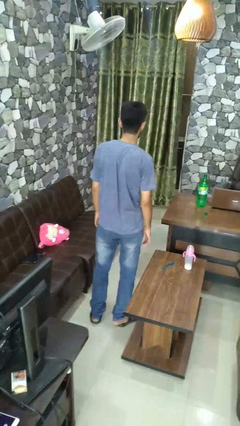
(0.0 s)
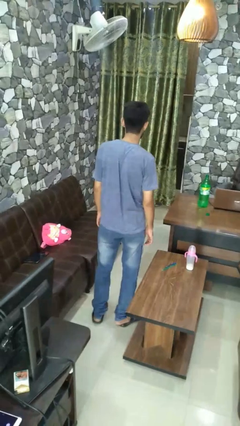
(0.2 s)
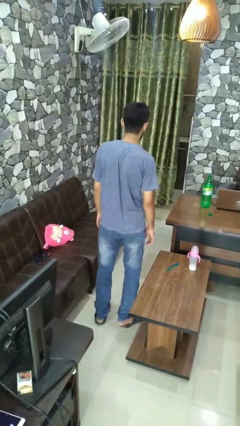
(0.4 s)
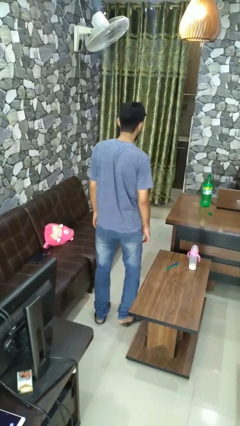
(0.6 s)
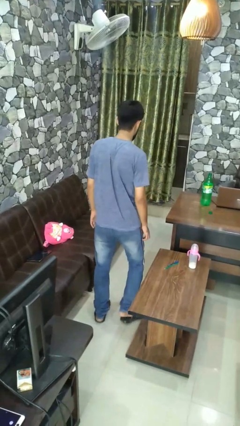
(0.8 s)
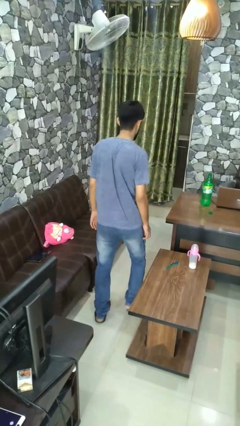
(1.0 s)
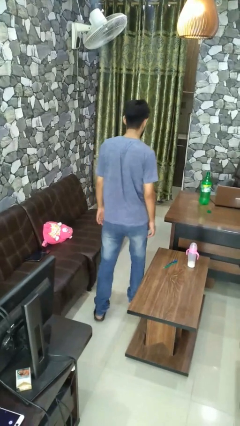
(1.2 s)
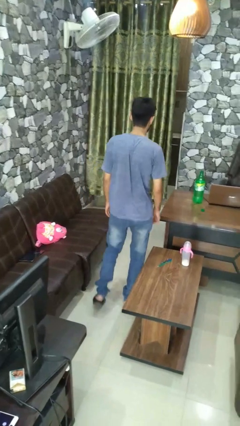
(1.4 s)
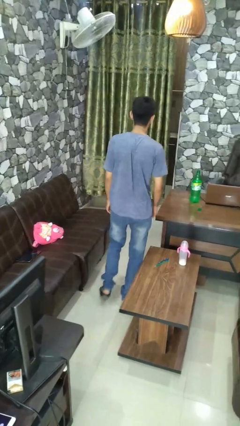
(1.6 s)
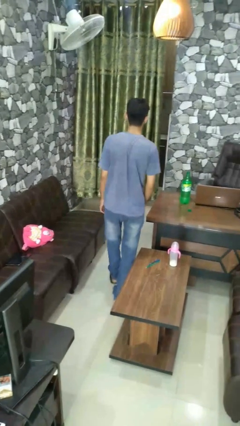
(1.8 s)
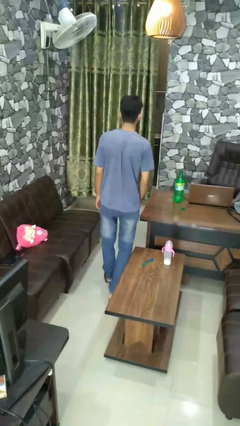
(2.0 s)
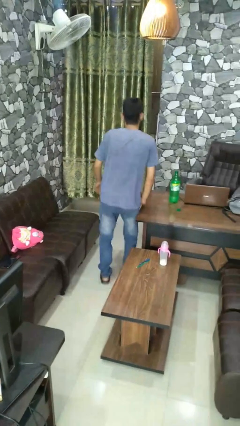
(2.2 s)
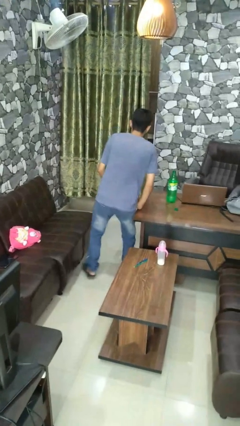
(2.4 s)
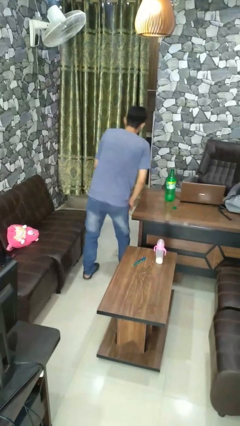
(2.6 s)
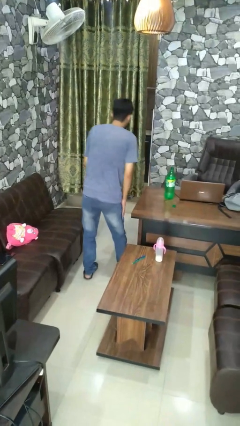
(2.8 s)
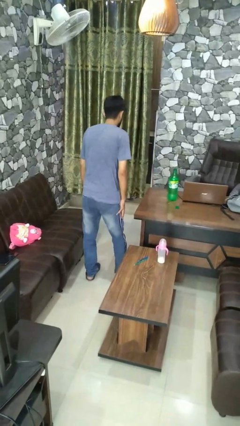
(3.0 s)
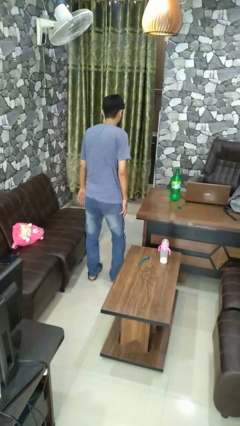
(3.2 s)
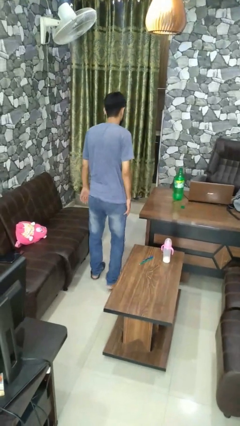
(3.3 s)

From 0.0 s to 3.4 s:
person bumps into table

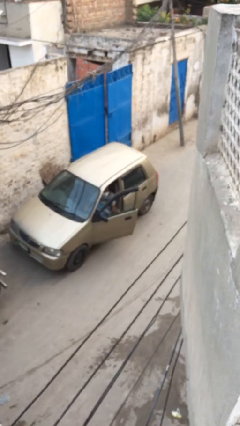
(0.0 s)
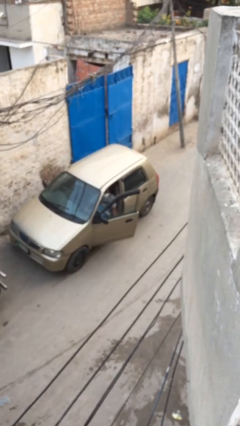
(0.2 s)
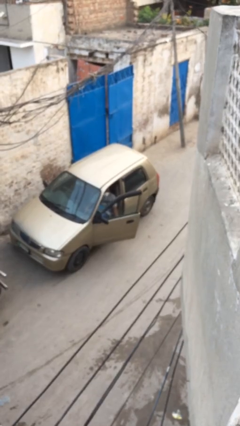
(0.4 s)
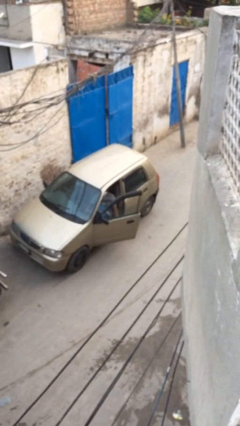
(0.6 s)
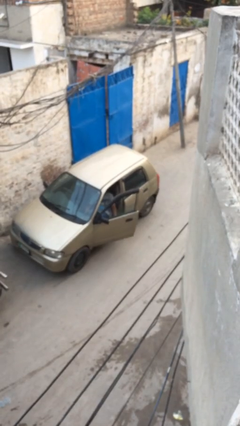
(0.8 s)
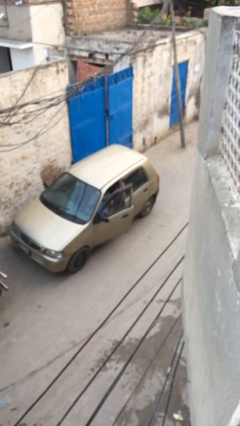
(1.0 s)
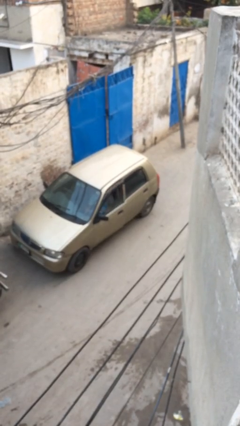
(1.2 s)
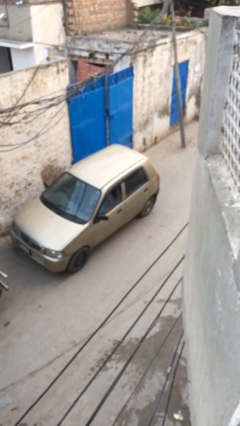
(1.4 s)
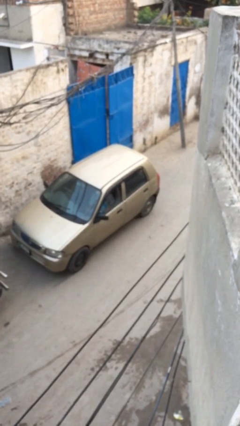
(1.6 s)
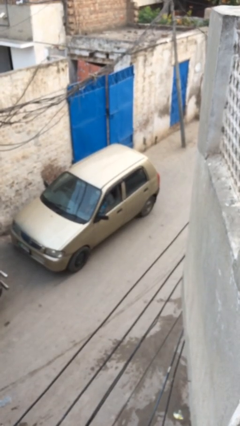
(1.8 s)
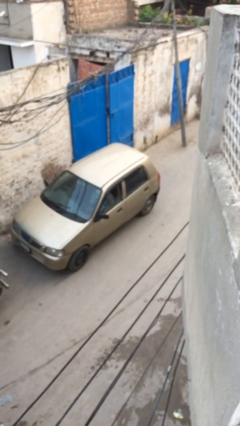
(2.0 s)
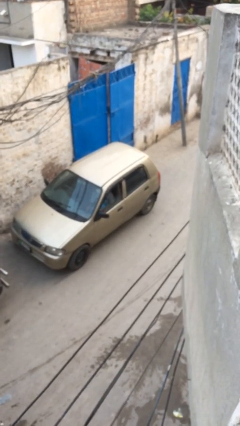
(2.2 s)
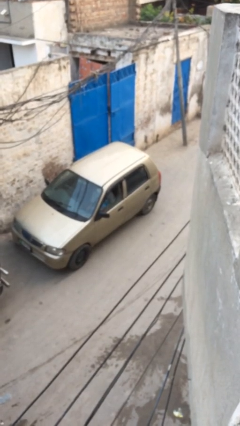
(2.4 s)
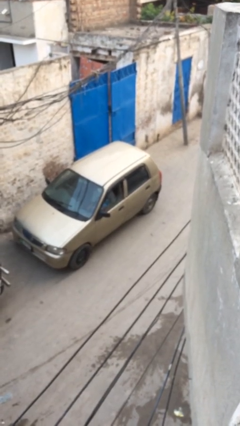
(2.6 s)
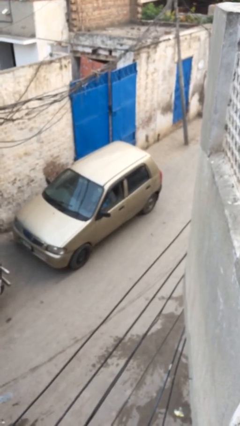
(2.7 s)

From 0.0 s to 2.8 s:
person closes car door

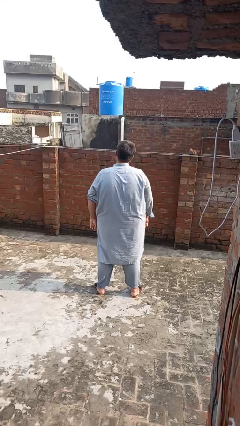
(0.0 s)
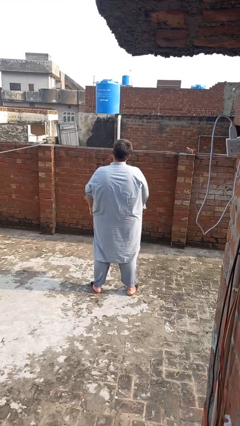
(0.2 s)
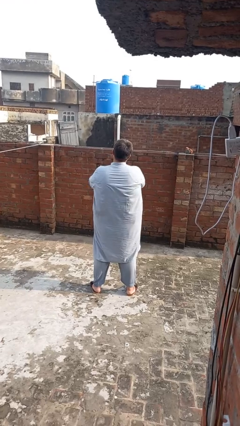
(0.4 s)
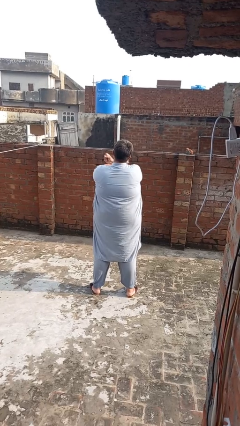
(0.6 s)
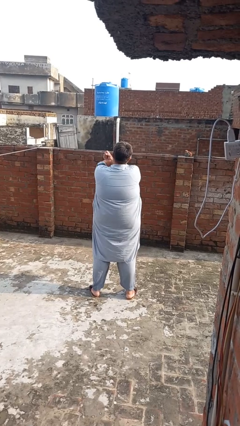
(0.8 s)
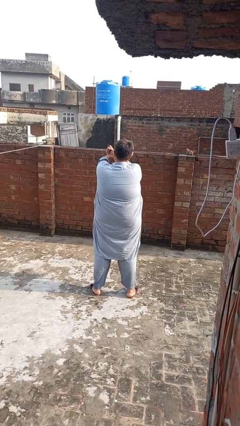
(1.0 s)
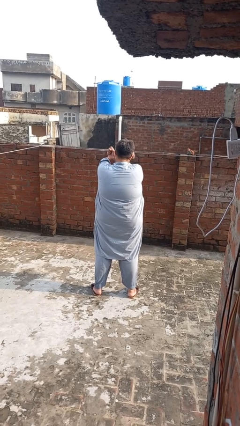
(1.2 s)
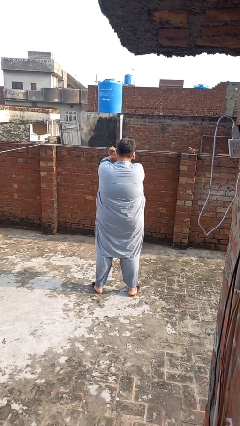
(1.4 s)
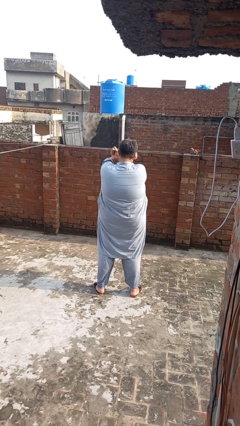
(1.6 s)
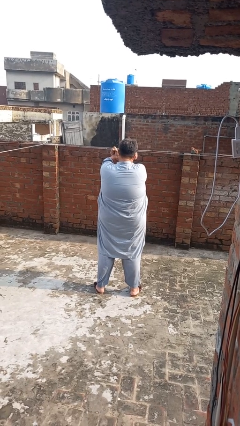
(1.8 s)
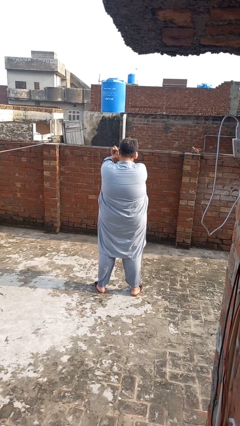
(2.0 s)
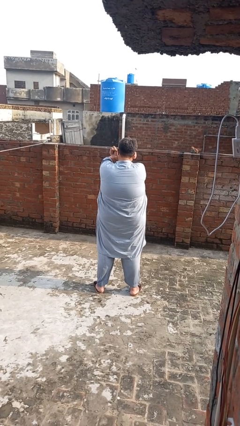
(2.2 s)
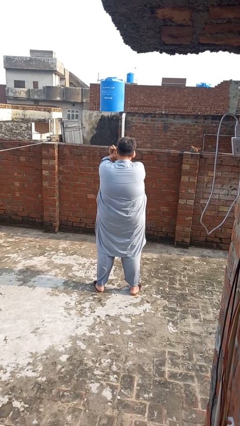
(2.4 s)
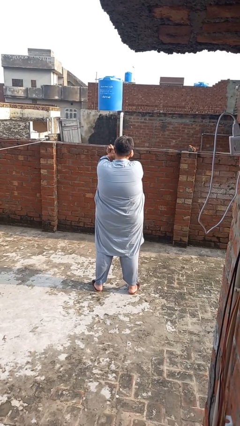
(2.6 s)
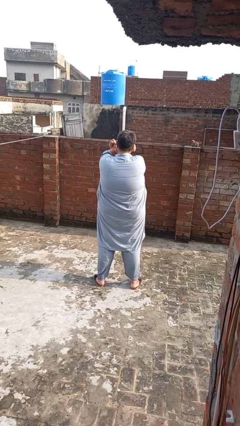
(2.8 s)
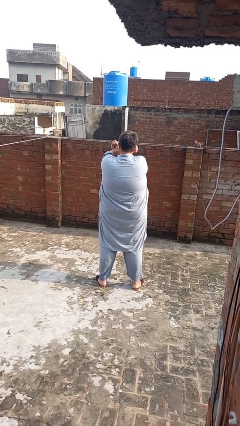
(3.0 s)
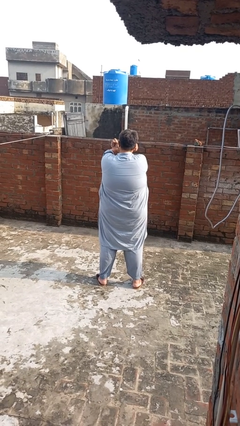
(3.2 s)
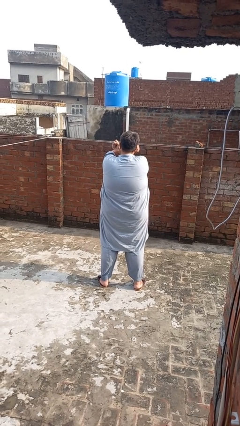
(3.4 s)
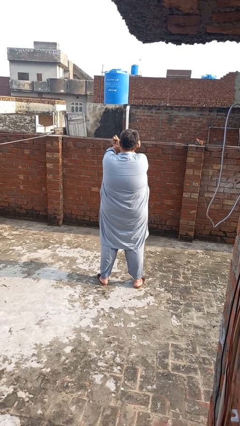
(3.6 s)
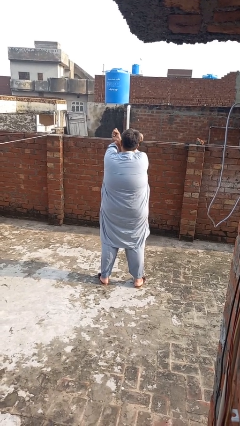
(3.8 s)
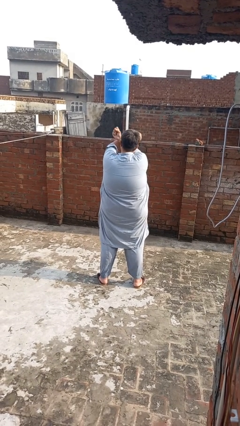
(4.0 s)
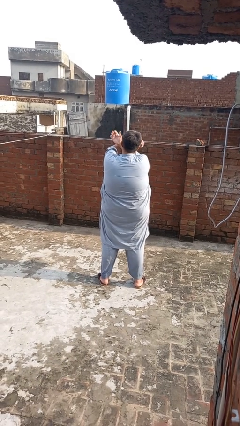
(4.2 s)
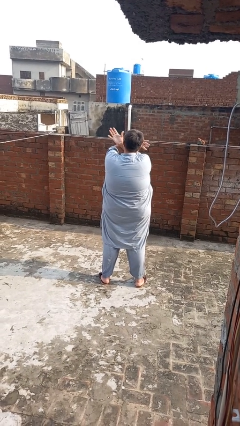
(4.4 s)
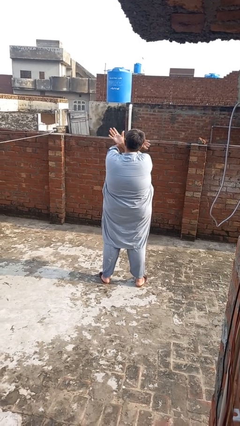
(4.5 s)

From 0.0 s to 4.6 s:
person gestures arms x

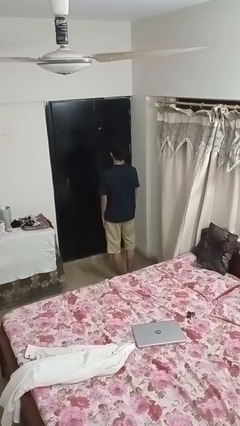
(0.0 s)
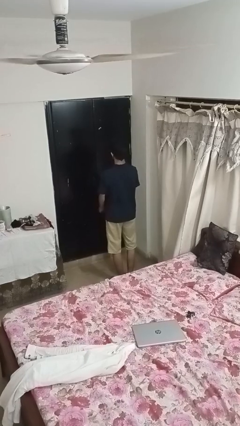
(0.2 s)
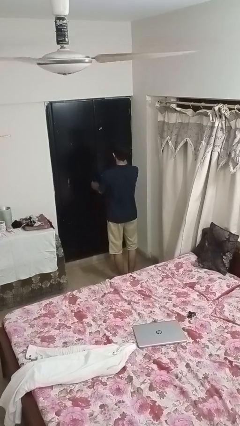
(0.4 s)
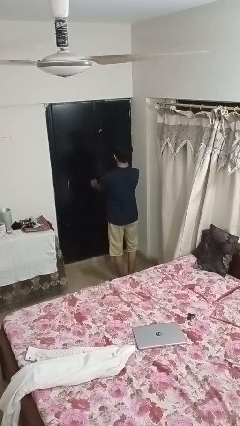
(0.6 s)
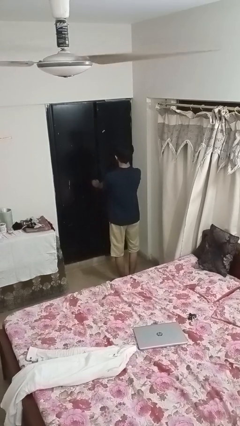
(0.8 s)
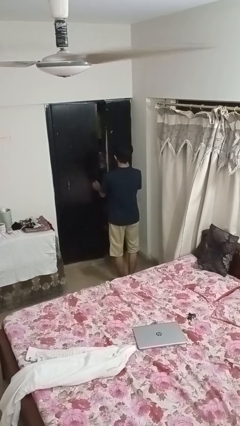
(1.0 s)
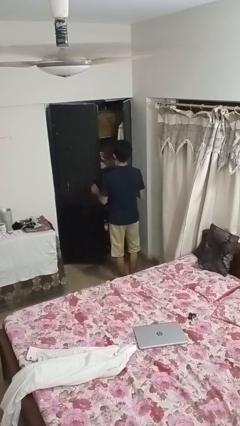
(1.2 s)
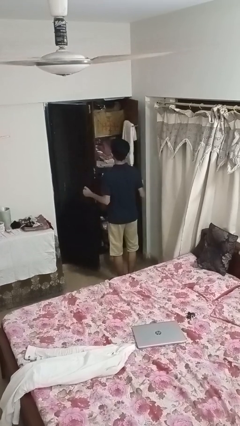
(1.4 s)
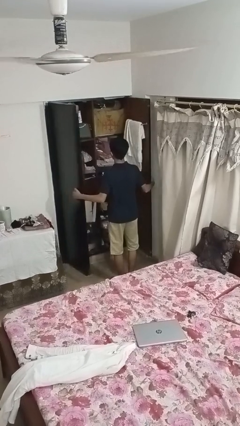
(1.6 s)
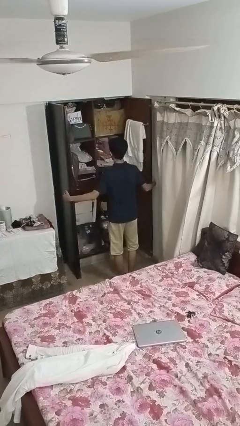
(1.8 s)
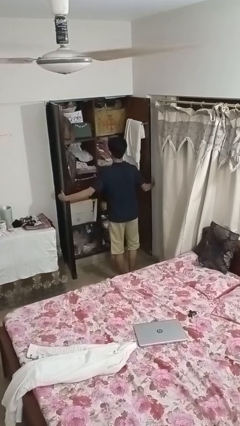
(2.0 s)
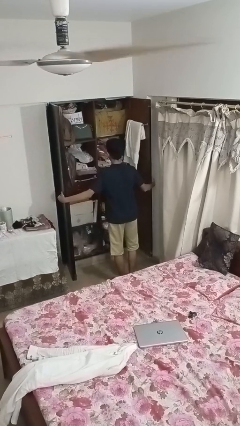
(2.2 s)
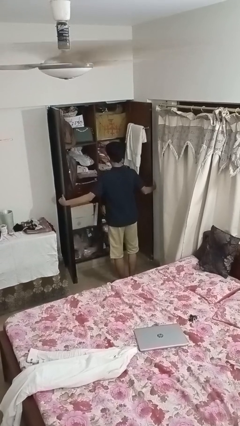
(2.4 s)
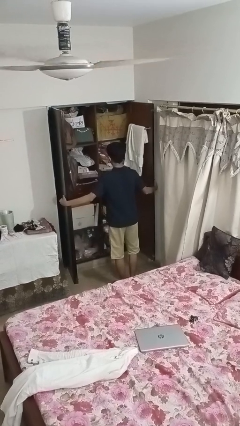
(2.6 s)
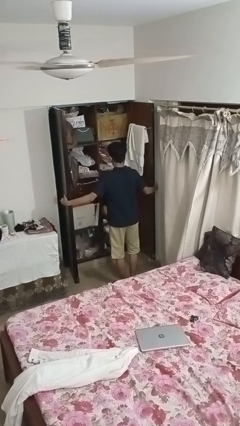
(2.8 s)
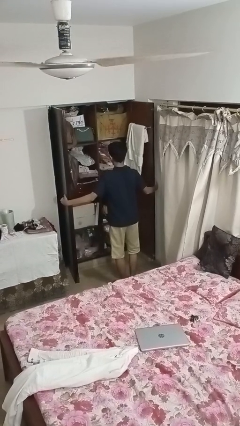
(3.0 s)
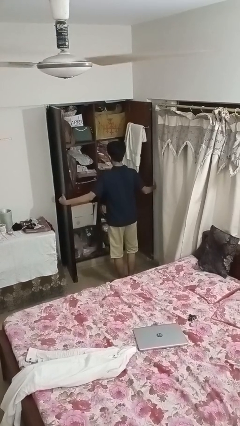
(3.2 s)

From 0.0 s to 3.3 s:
person opens closet door

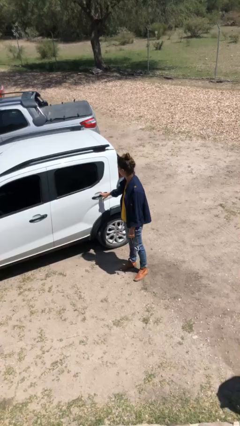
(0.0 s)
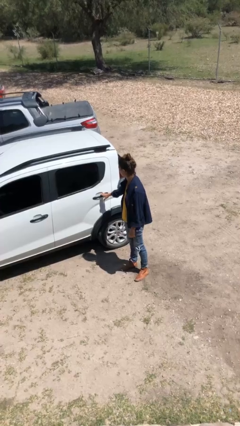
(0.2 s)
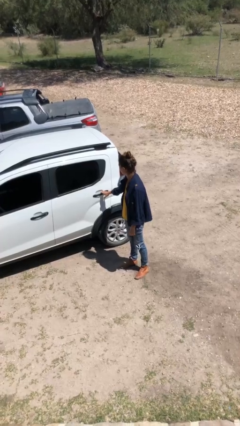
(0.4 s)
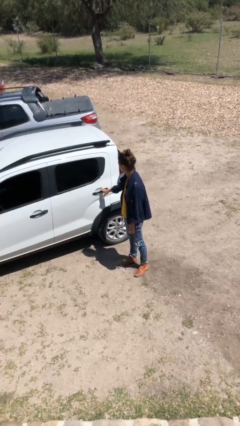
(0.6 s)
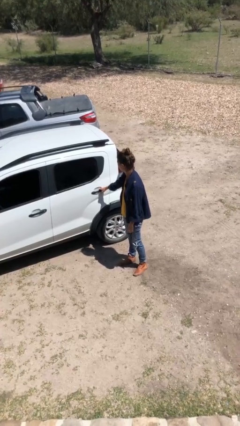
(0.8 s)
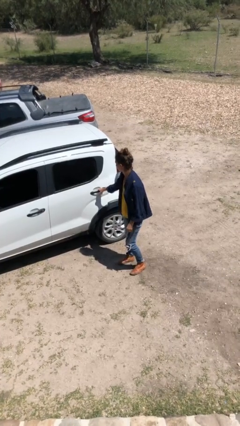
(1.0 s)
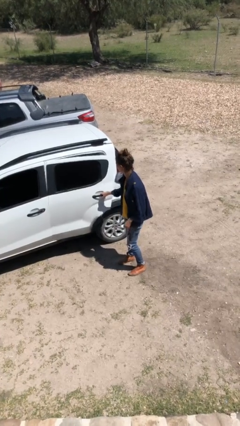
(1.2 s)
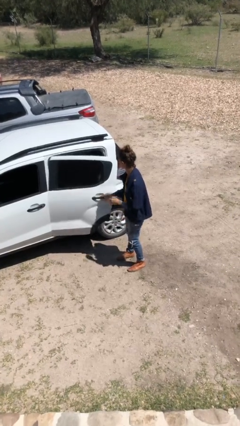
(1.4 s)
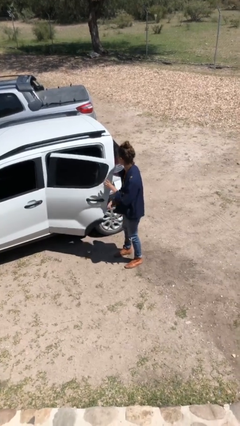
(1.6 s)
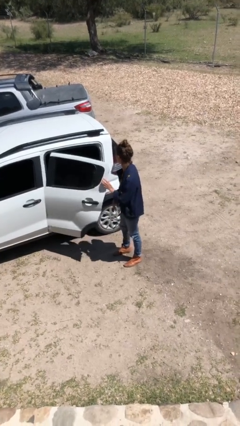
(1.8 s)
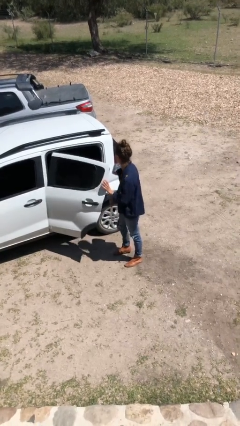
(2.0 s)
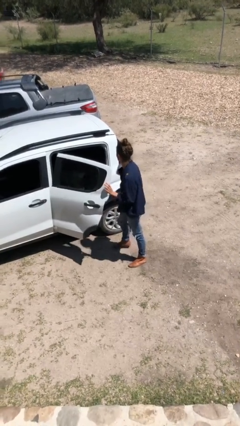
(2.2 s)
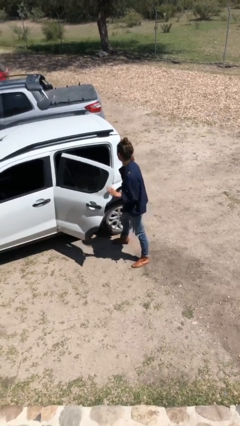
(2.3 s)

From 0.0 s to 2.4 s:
person opens car door

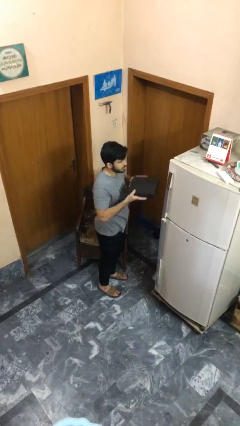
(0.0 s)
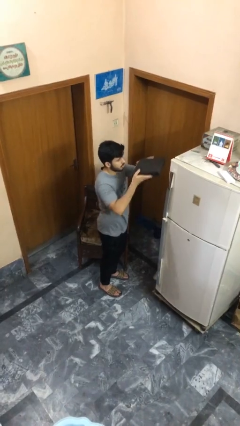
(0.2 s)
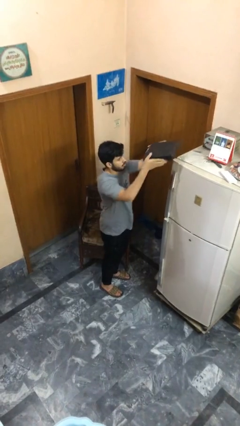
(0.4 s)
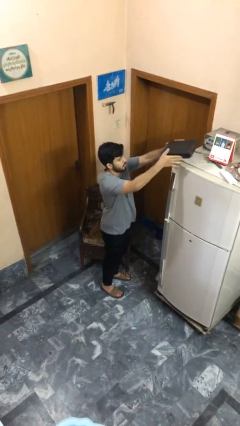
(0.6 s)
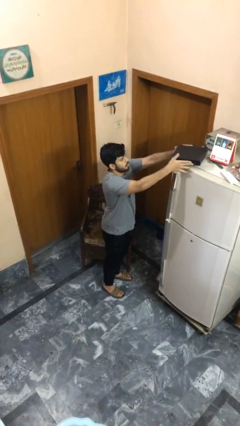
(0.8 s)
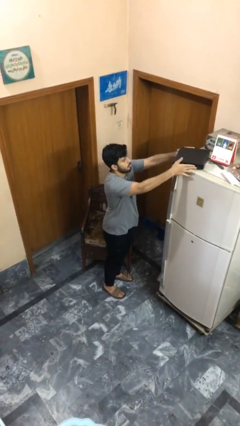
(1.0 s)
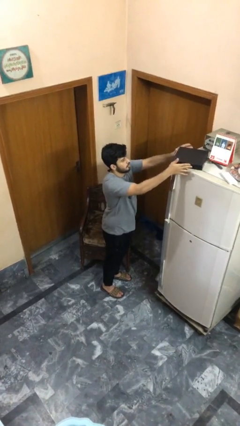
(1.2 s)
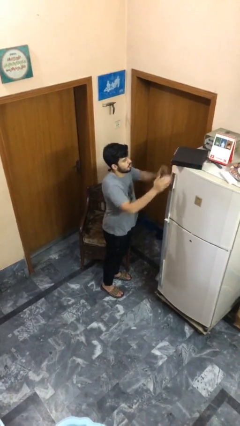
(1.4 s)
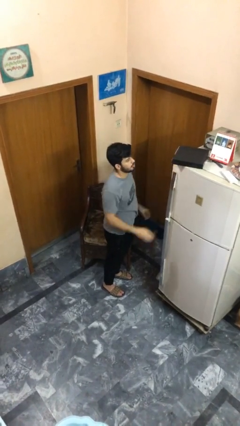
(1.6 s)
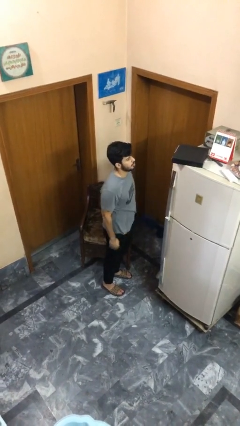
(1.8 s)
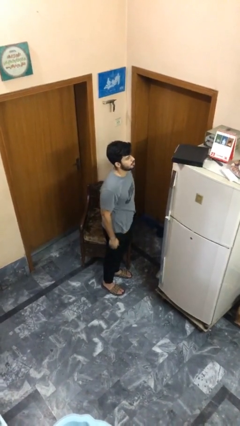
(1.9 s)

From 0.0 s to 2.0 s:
person puts down object on countertop
